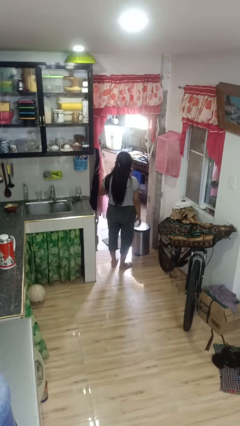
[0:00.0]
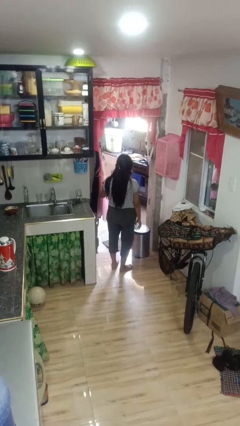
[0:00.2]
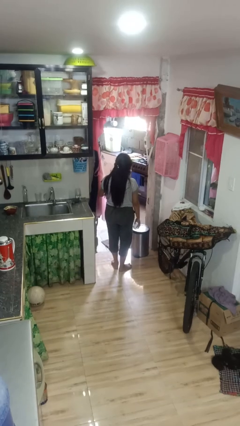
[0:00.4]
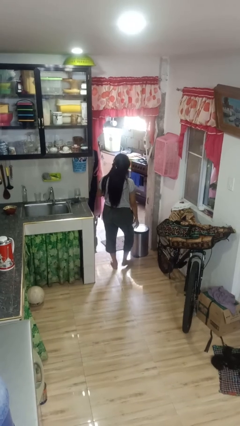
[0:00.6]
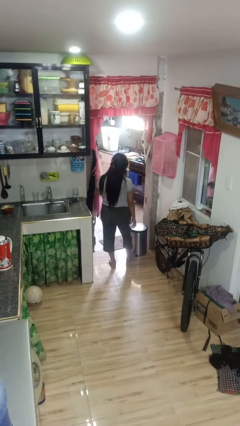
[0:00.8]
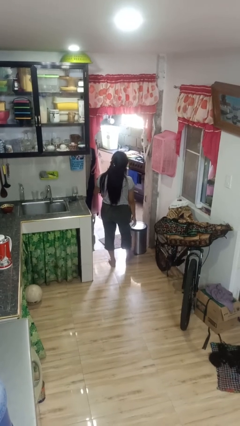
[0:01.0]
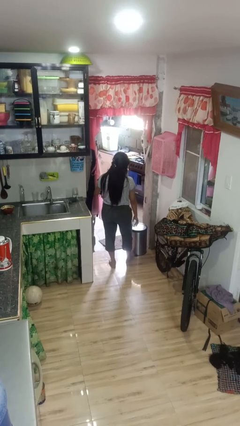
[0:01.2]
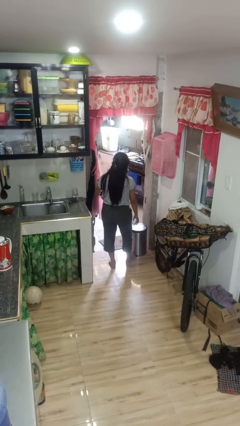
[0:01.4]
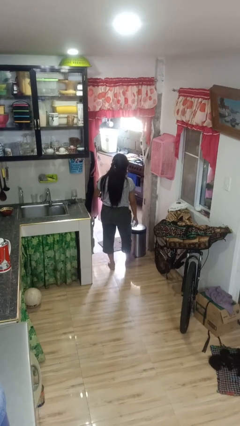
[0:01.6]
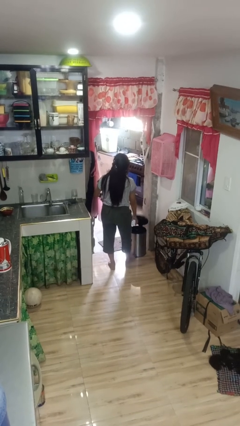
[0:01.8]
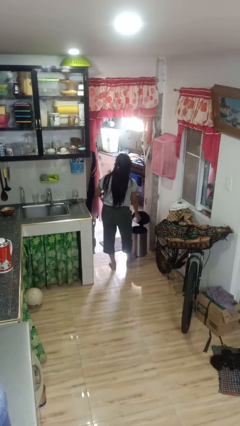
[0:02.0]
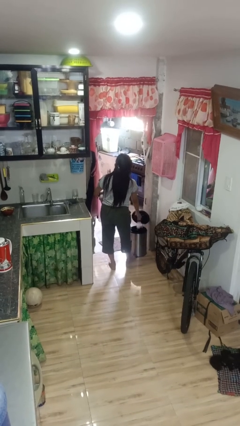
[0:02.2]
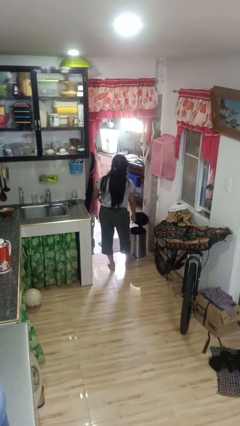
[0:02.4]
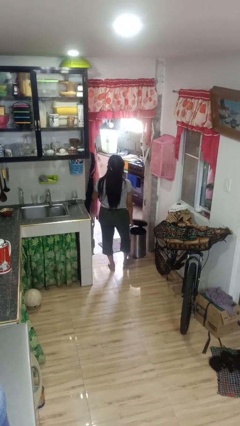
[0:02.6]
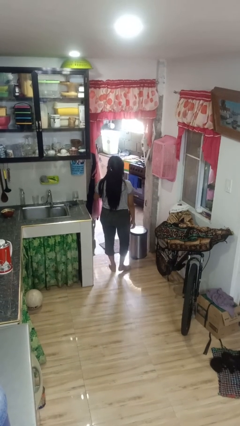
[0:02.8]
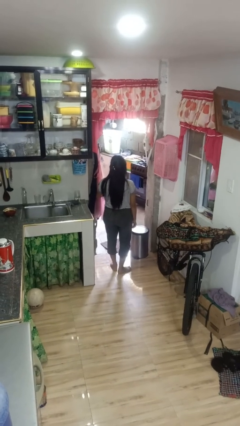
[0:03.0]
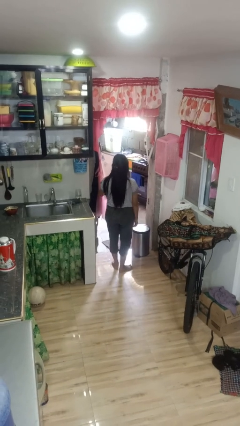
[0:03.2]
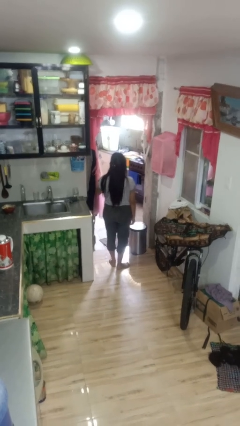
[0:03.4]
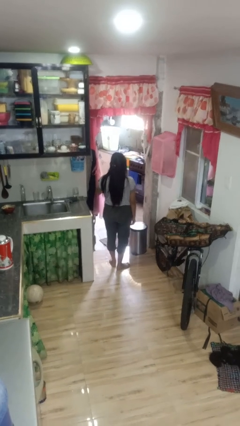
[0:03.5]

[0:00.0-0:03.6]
person discards trash

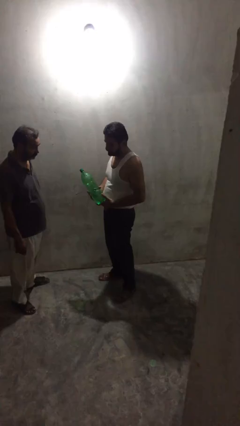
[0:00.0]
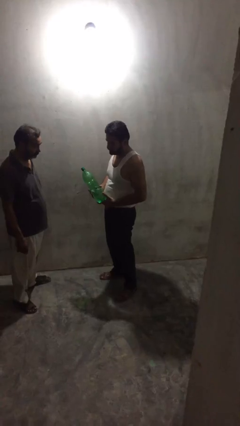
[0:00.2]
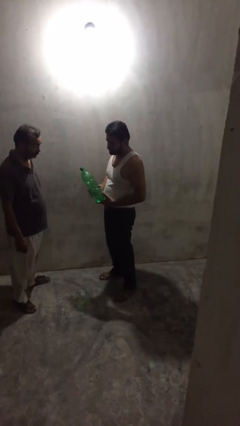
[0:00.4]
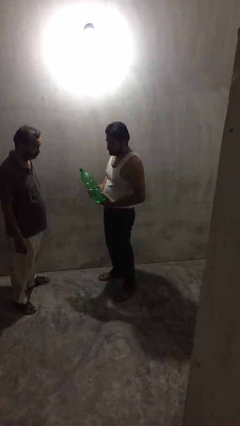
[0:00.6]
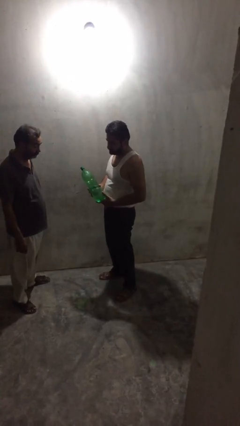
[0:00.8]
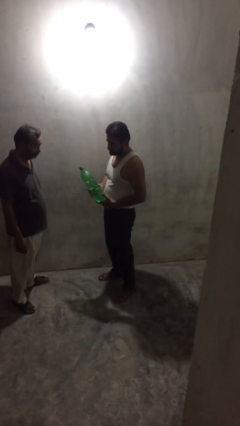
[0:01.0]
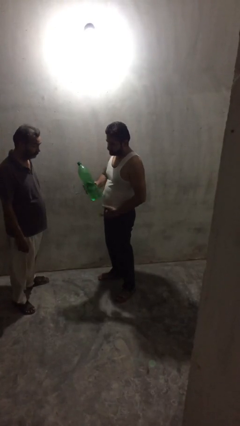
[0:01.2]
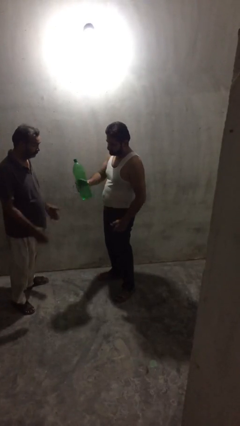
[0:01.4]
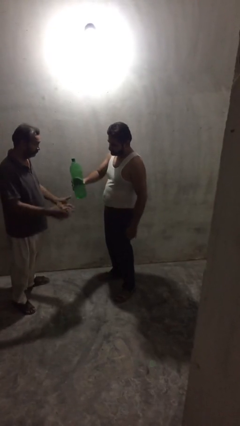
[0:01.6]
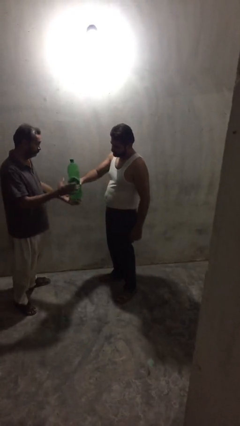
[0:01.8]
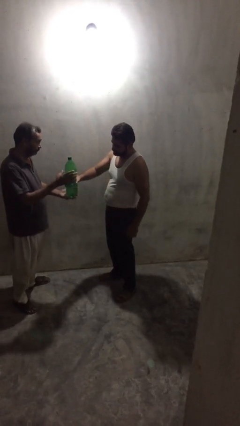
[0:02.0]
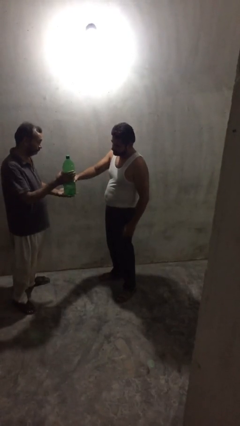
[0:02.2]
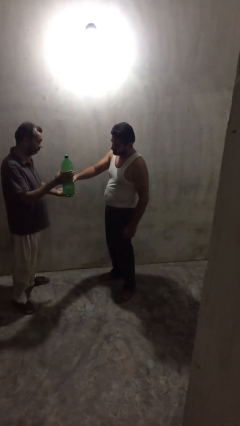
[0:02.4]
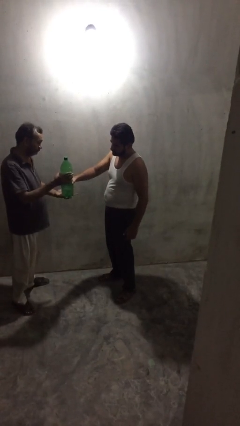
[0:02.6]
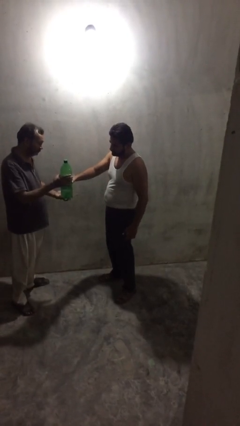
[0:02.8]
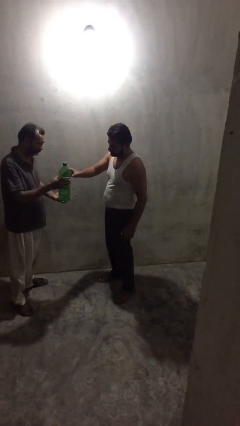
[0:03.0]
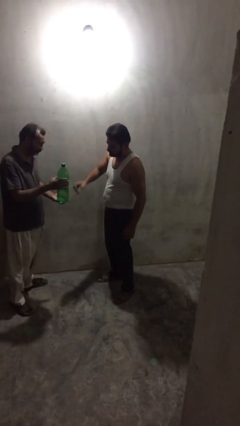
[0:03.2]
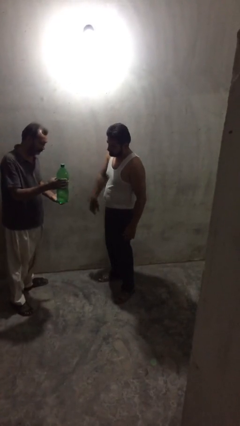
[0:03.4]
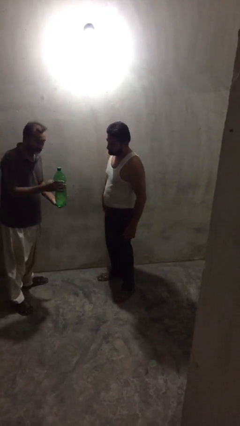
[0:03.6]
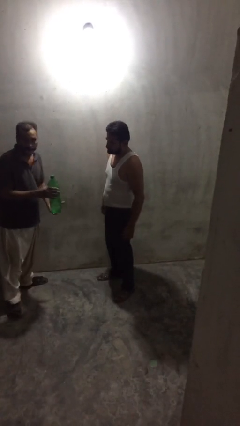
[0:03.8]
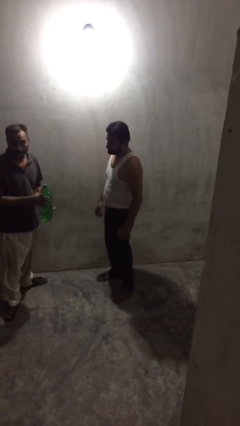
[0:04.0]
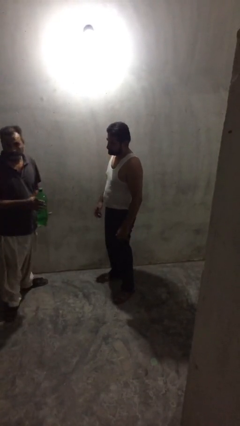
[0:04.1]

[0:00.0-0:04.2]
person transfers object to person

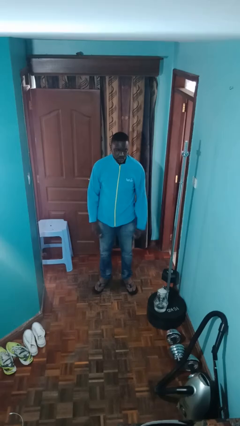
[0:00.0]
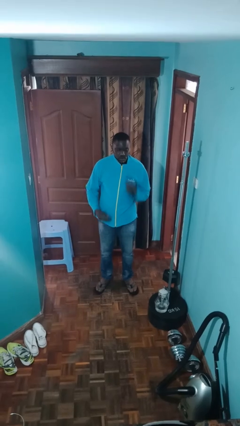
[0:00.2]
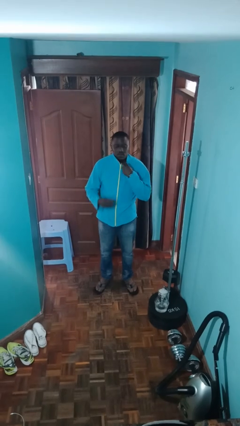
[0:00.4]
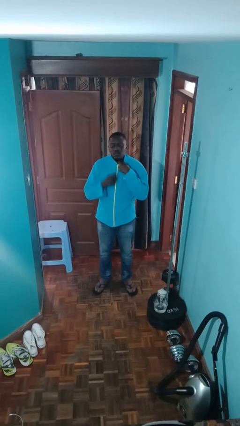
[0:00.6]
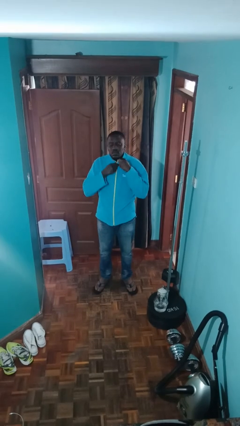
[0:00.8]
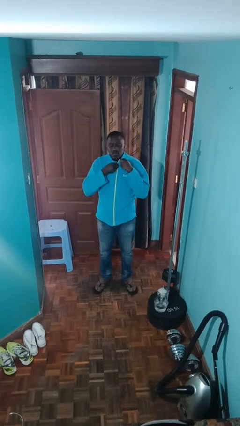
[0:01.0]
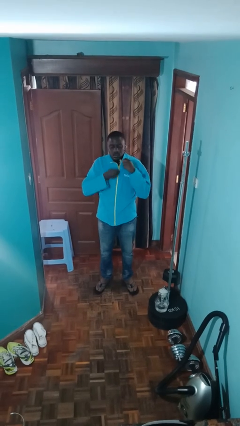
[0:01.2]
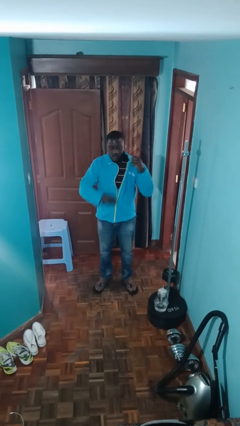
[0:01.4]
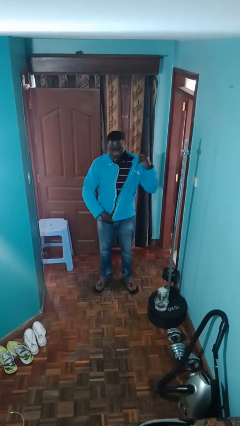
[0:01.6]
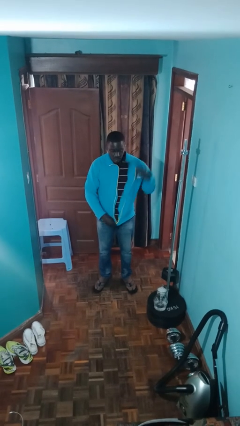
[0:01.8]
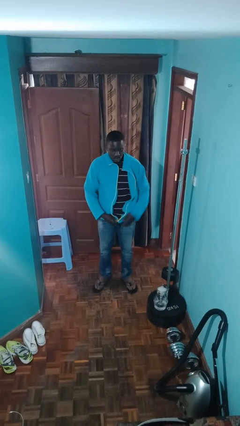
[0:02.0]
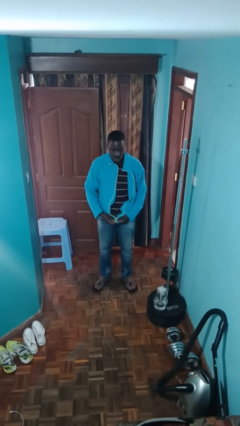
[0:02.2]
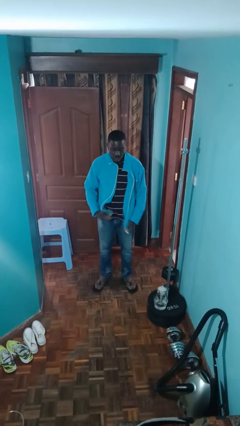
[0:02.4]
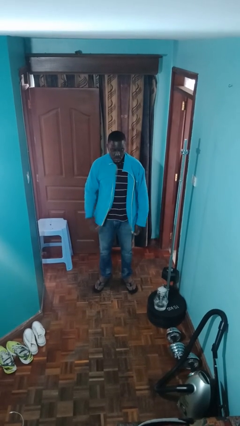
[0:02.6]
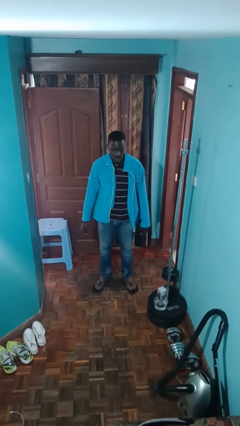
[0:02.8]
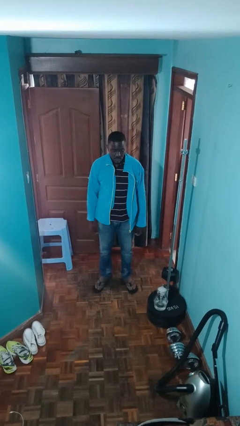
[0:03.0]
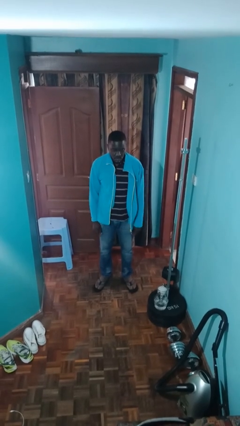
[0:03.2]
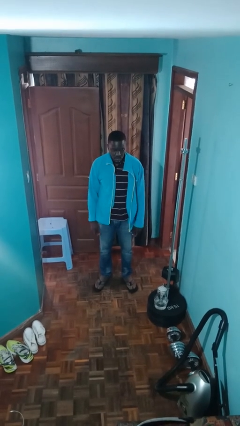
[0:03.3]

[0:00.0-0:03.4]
person unzips jacket

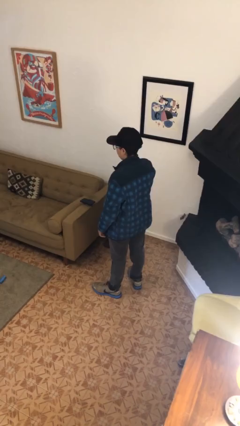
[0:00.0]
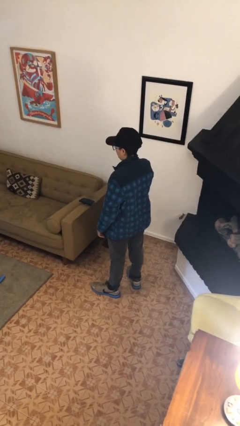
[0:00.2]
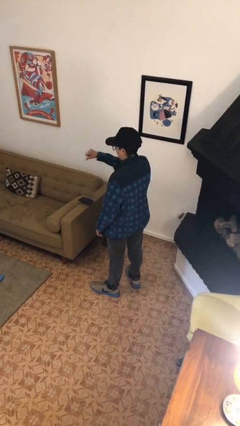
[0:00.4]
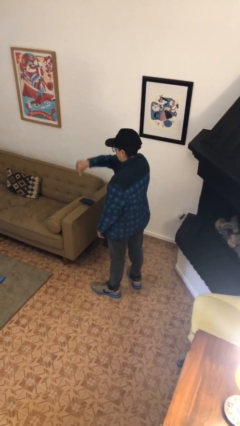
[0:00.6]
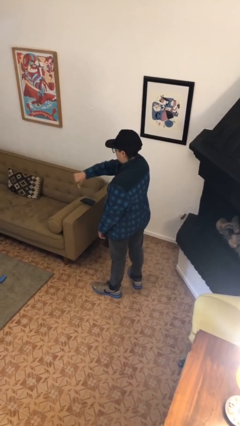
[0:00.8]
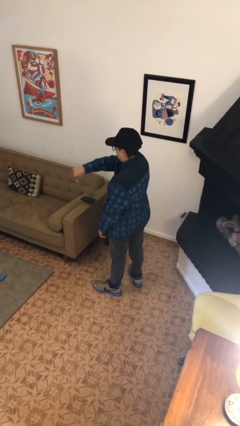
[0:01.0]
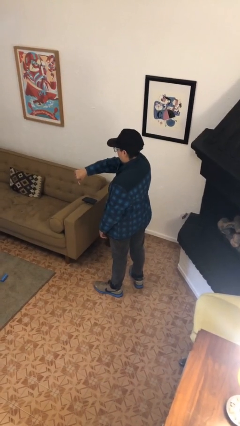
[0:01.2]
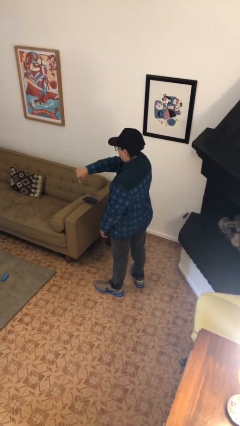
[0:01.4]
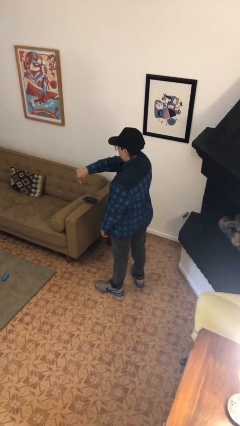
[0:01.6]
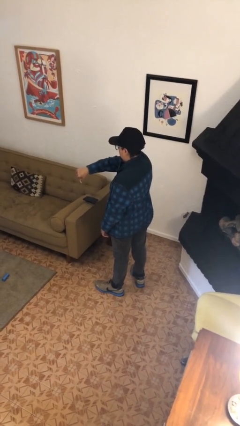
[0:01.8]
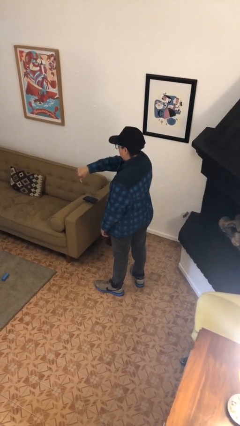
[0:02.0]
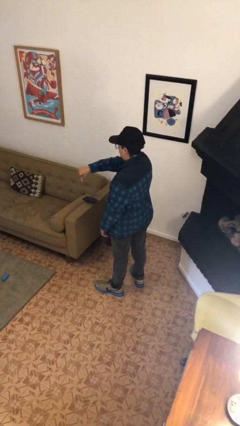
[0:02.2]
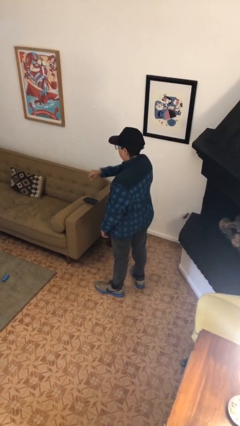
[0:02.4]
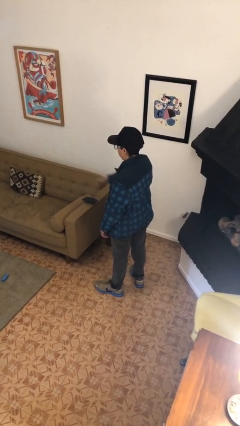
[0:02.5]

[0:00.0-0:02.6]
person gestures thumbs down

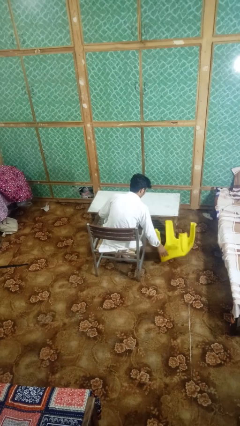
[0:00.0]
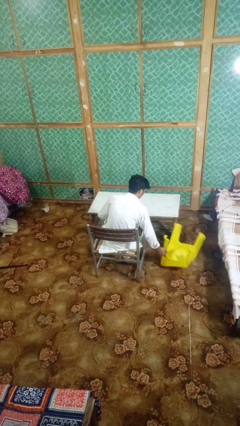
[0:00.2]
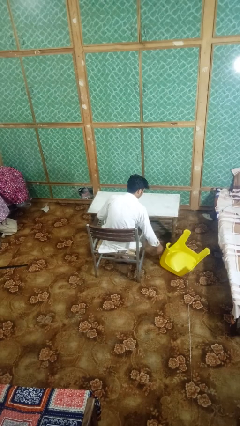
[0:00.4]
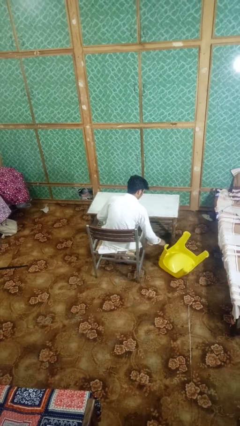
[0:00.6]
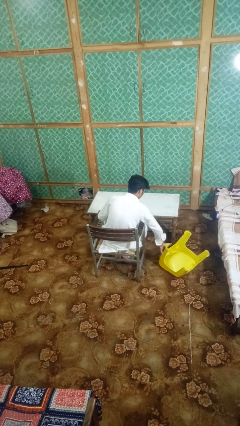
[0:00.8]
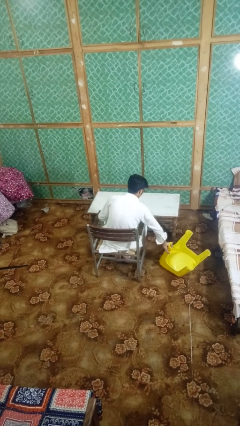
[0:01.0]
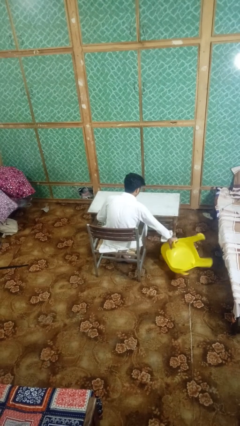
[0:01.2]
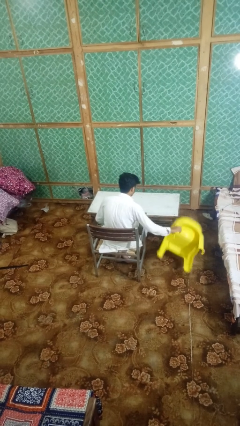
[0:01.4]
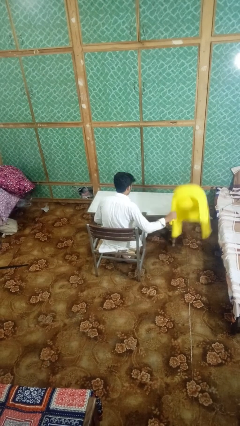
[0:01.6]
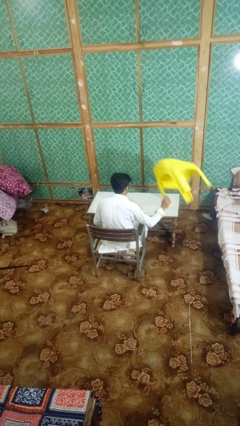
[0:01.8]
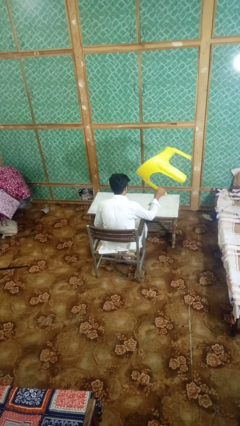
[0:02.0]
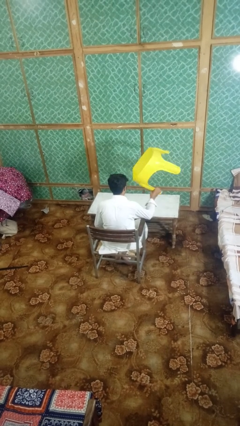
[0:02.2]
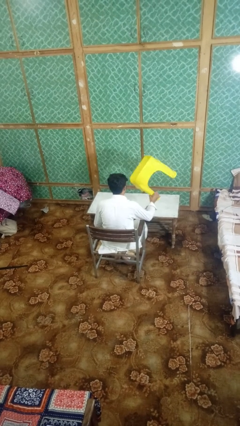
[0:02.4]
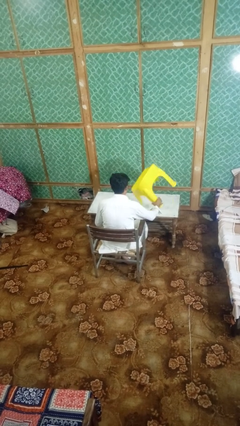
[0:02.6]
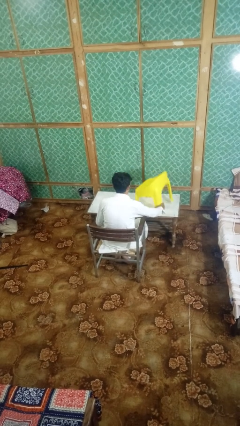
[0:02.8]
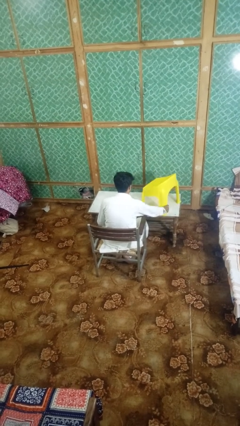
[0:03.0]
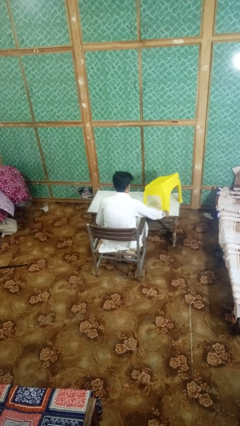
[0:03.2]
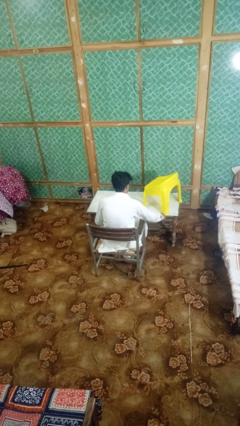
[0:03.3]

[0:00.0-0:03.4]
person sets upright furniture

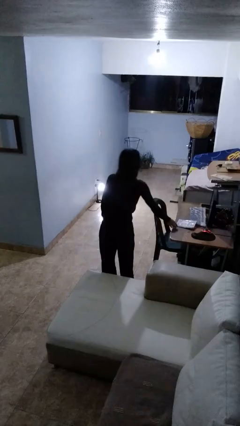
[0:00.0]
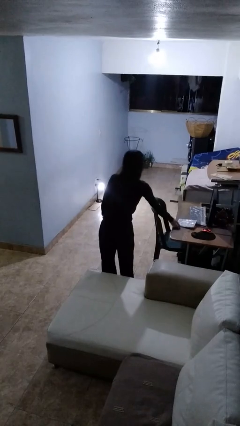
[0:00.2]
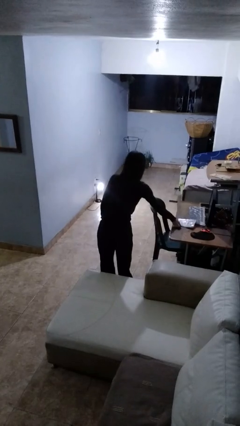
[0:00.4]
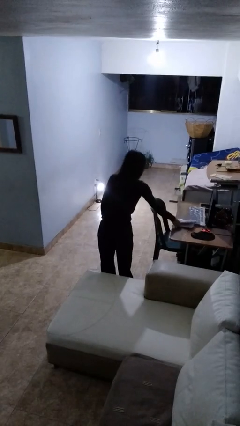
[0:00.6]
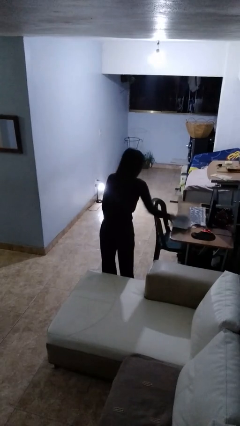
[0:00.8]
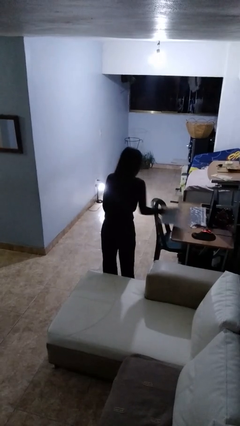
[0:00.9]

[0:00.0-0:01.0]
person picks up object from table
